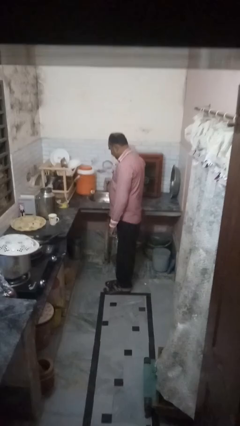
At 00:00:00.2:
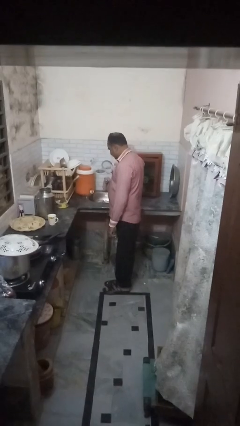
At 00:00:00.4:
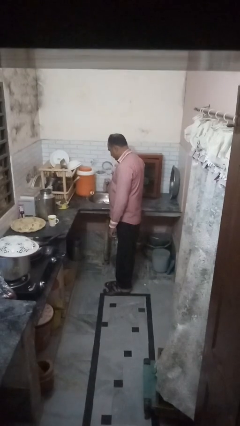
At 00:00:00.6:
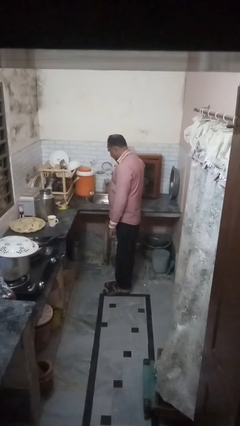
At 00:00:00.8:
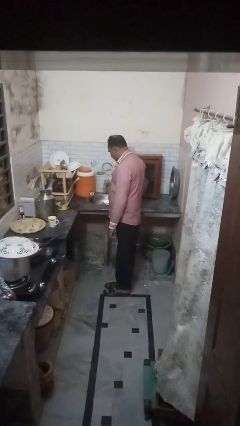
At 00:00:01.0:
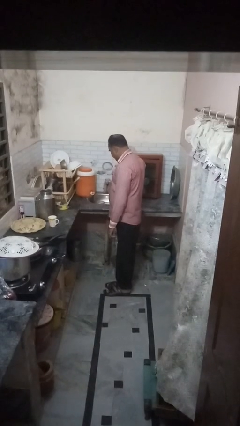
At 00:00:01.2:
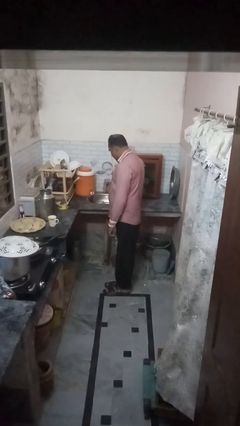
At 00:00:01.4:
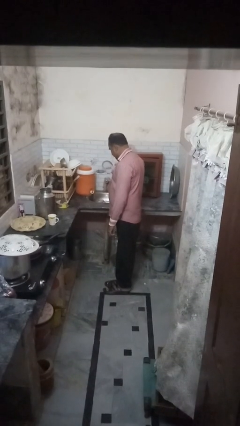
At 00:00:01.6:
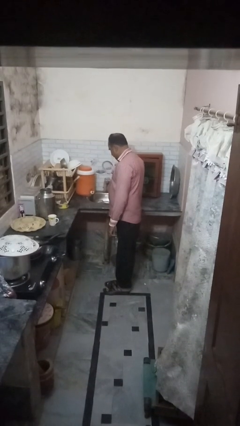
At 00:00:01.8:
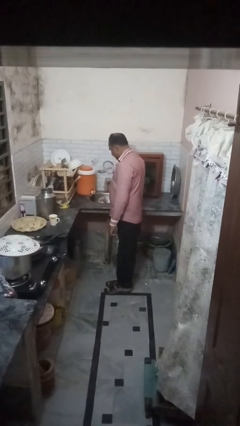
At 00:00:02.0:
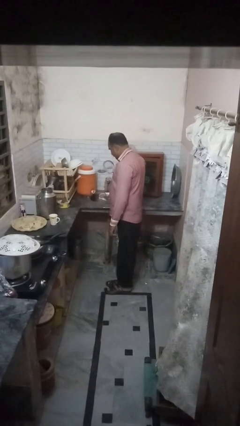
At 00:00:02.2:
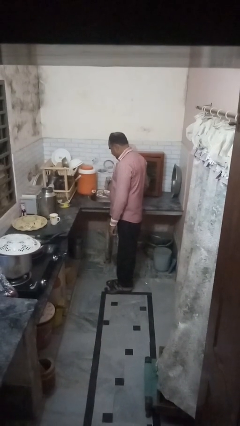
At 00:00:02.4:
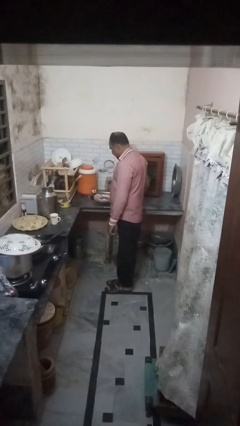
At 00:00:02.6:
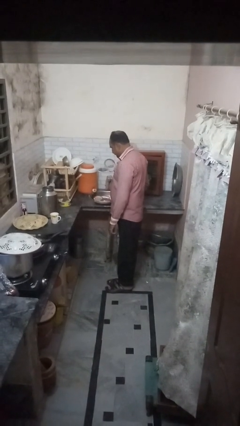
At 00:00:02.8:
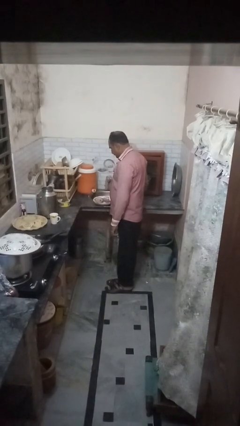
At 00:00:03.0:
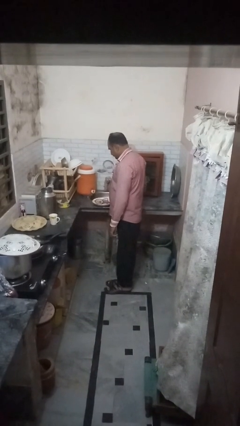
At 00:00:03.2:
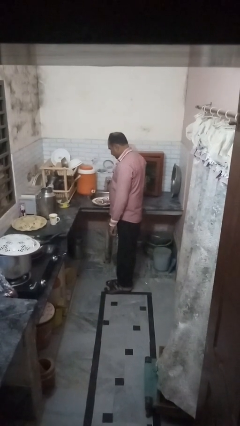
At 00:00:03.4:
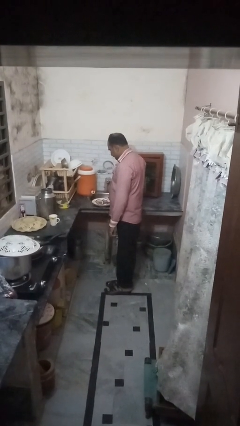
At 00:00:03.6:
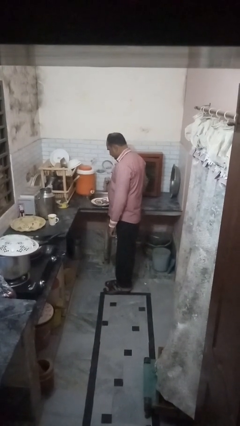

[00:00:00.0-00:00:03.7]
person unloads dishwasher

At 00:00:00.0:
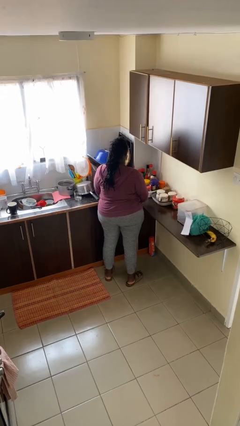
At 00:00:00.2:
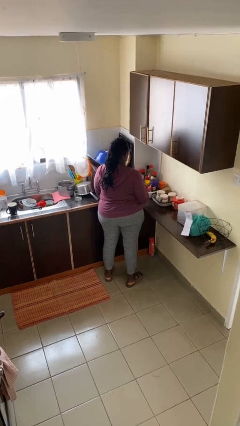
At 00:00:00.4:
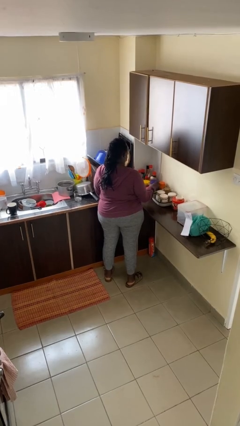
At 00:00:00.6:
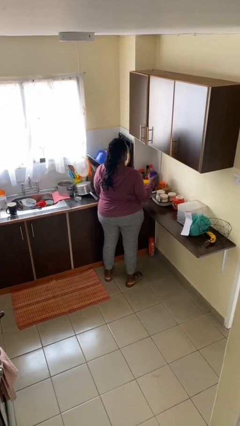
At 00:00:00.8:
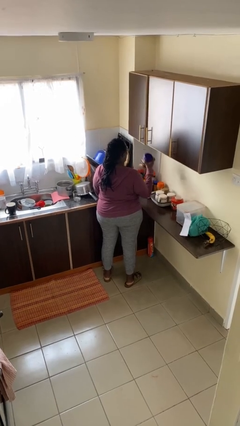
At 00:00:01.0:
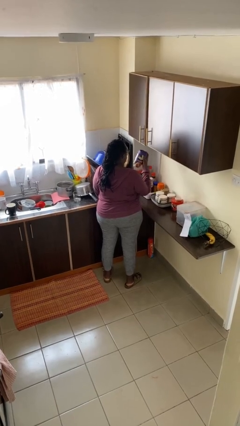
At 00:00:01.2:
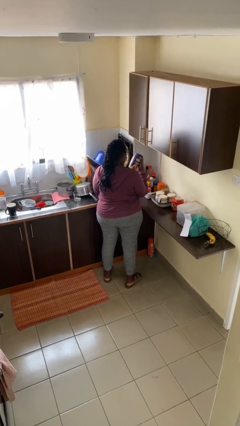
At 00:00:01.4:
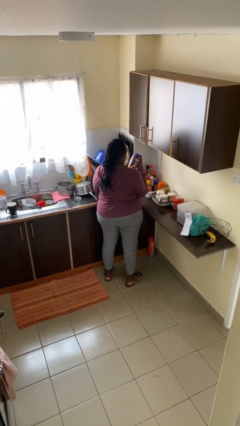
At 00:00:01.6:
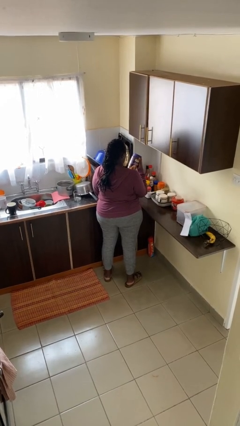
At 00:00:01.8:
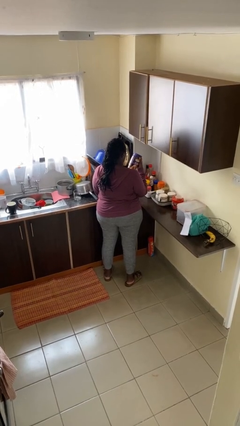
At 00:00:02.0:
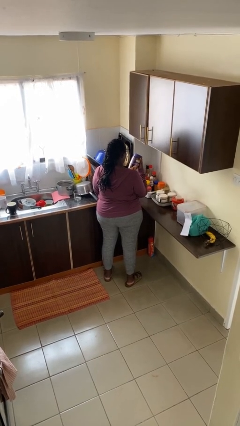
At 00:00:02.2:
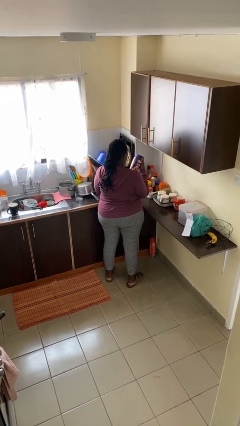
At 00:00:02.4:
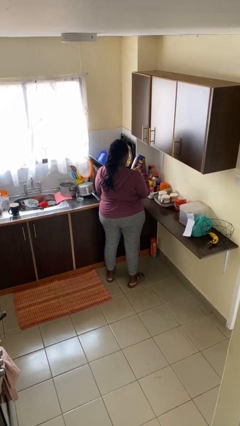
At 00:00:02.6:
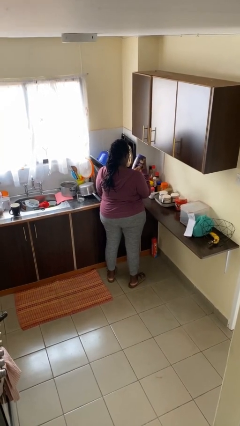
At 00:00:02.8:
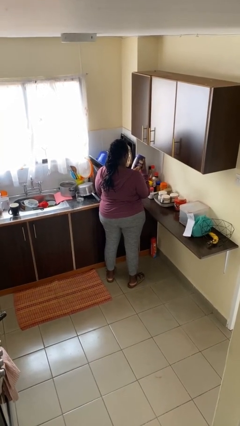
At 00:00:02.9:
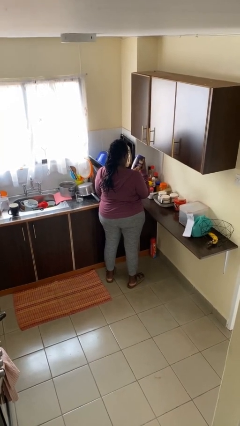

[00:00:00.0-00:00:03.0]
person picks up object from countertop

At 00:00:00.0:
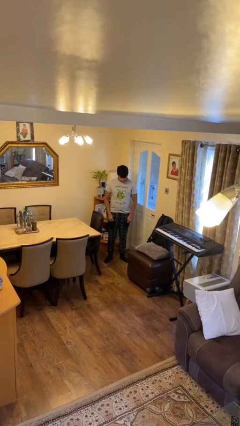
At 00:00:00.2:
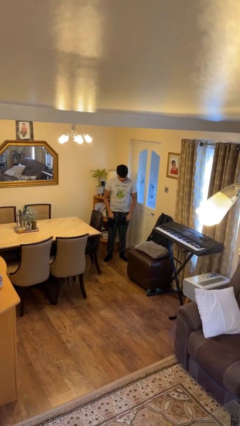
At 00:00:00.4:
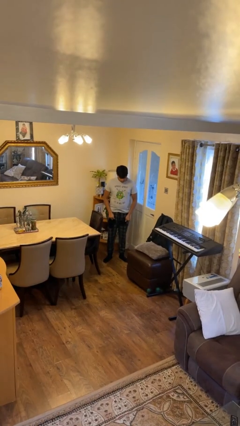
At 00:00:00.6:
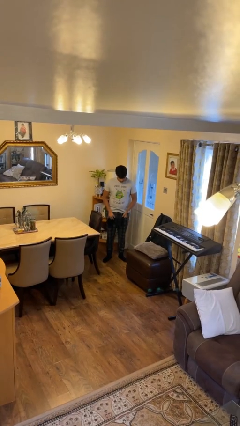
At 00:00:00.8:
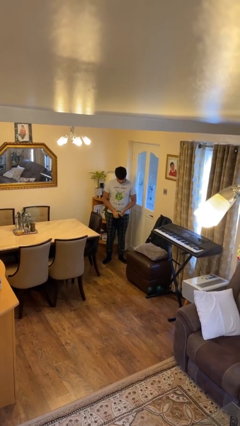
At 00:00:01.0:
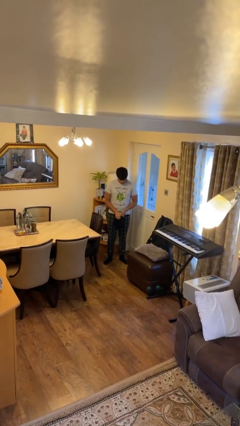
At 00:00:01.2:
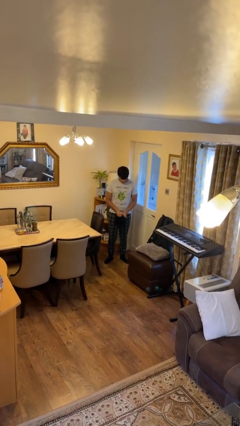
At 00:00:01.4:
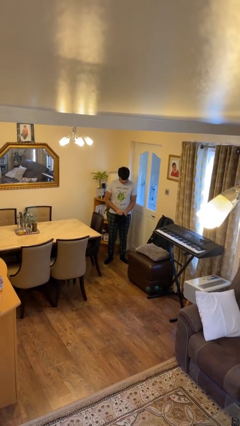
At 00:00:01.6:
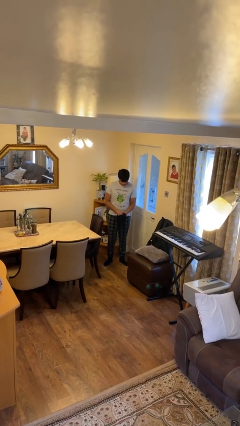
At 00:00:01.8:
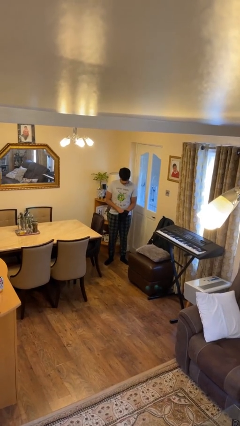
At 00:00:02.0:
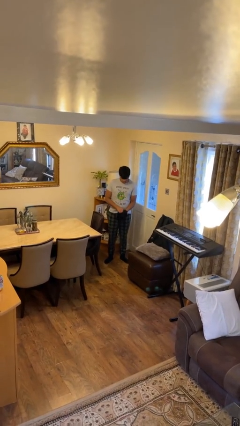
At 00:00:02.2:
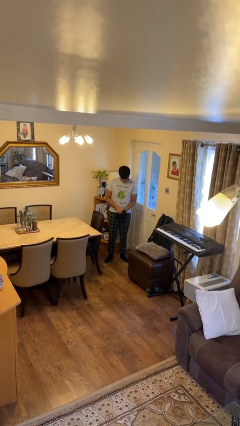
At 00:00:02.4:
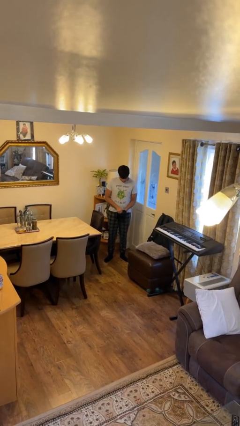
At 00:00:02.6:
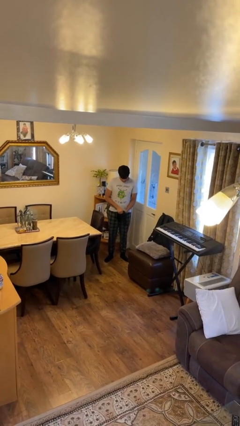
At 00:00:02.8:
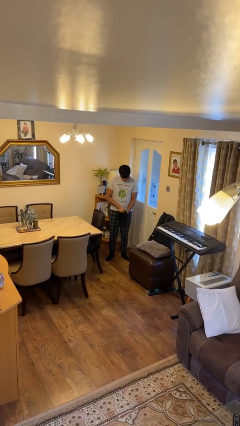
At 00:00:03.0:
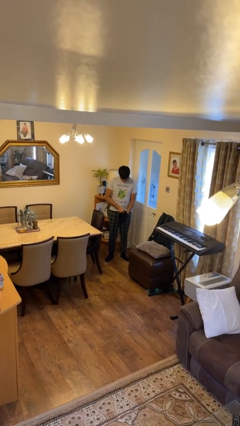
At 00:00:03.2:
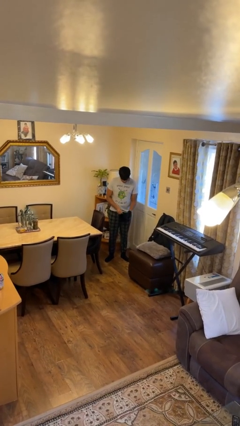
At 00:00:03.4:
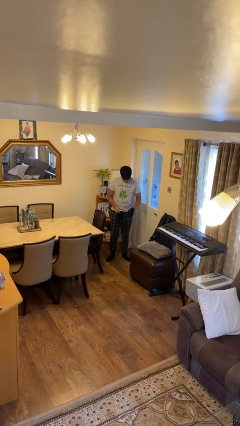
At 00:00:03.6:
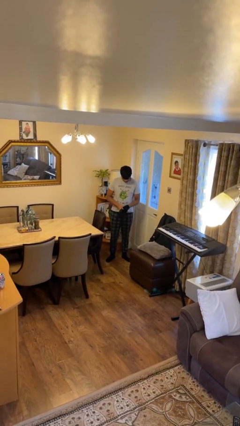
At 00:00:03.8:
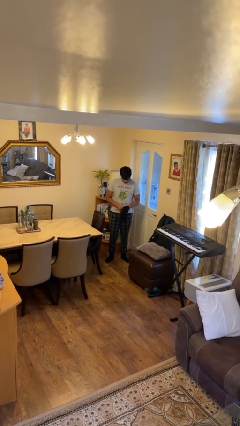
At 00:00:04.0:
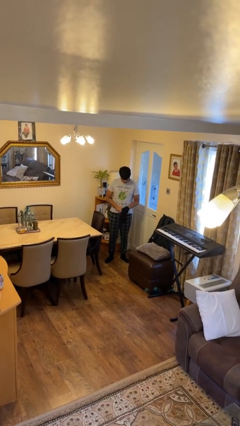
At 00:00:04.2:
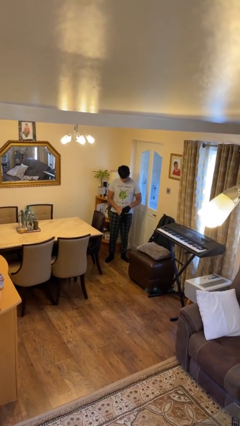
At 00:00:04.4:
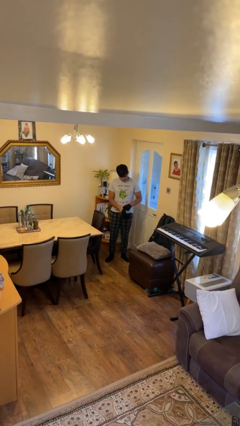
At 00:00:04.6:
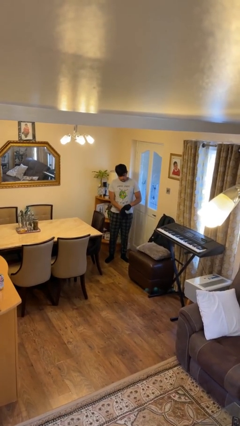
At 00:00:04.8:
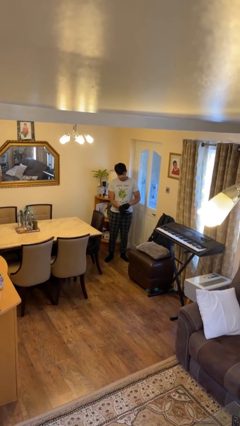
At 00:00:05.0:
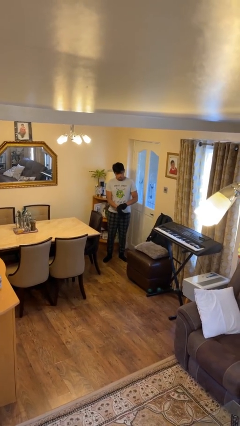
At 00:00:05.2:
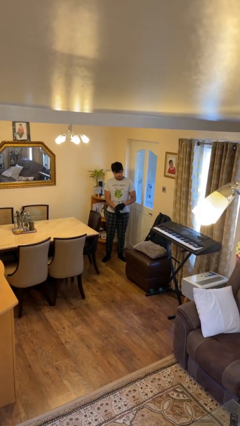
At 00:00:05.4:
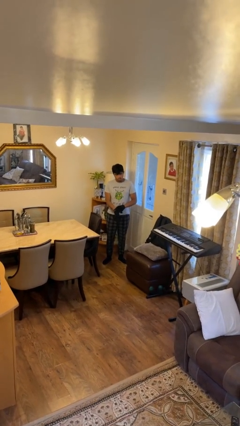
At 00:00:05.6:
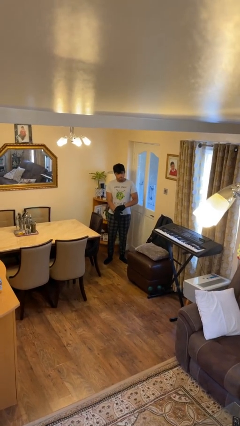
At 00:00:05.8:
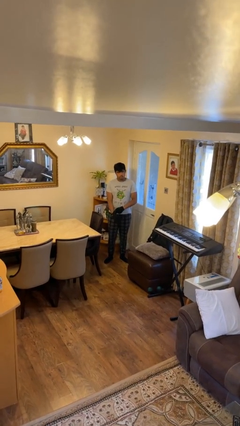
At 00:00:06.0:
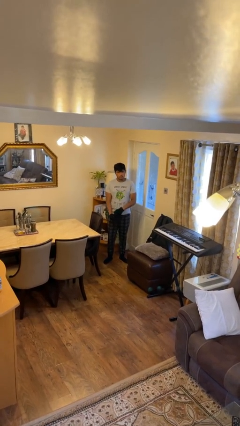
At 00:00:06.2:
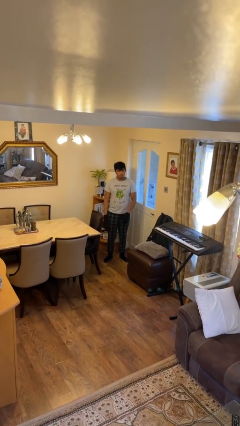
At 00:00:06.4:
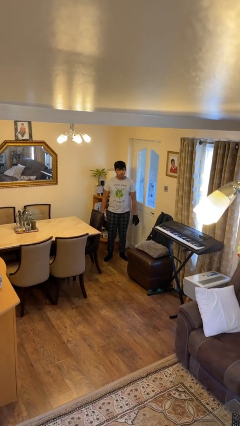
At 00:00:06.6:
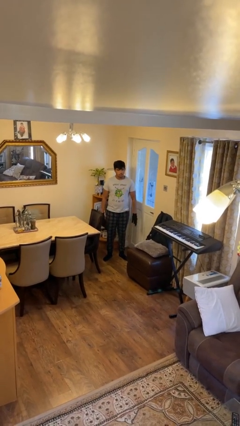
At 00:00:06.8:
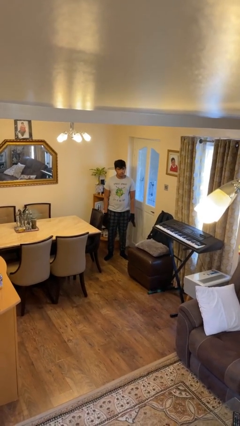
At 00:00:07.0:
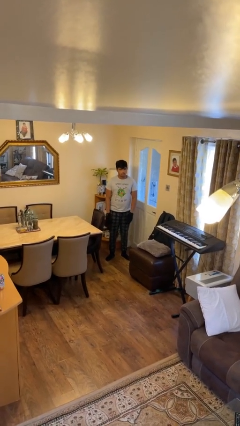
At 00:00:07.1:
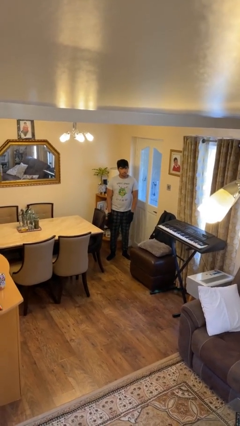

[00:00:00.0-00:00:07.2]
person puts on gloves

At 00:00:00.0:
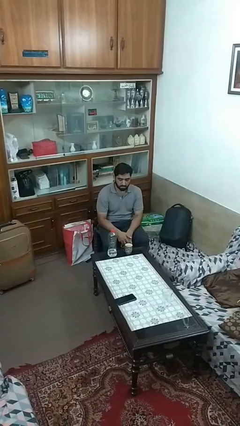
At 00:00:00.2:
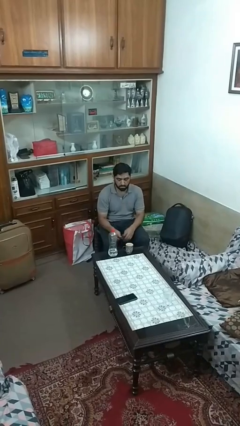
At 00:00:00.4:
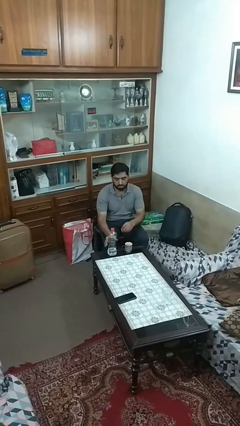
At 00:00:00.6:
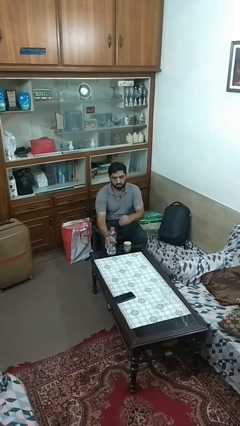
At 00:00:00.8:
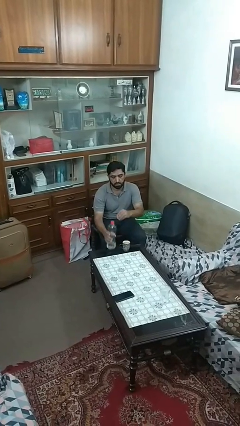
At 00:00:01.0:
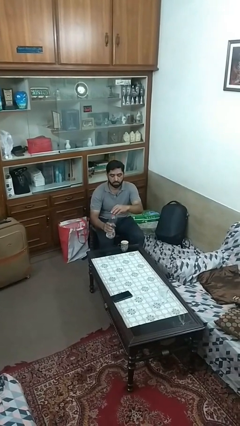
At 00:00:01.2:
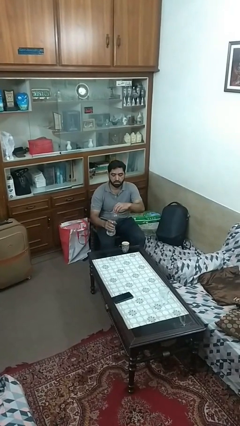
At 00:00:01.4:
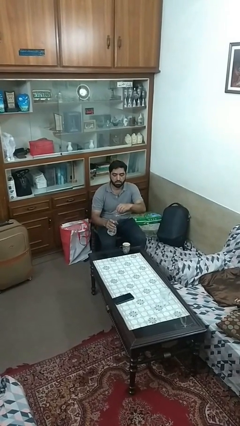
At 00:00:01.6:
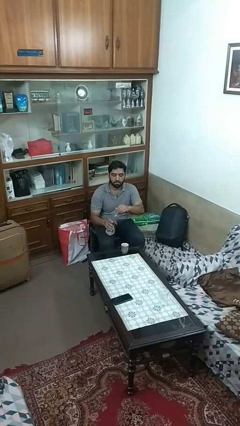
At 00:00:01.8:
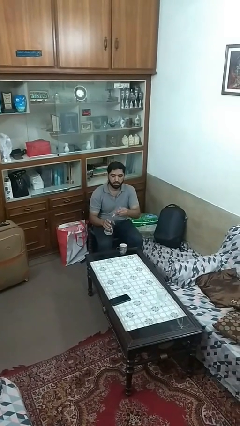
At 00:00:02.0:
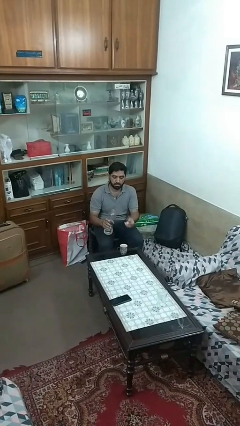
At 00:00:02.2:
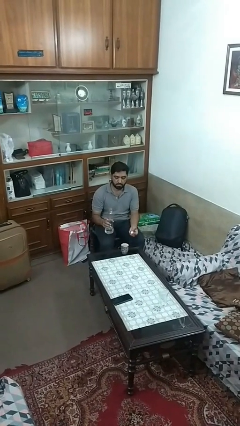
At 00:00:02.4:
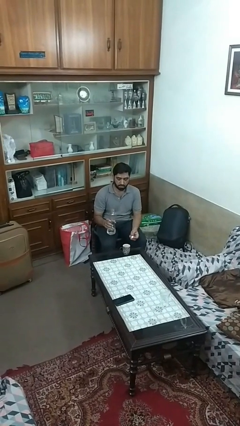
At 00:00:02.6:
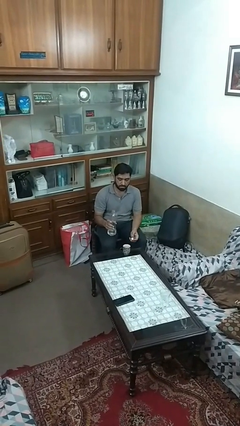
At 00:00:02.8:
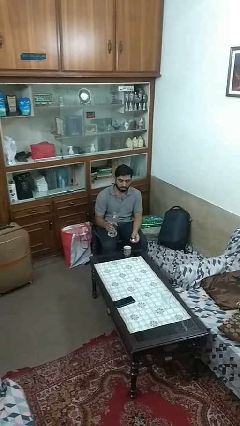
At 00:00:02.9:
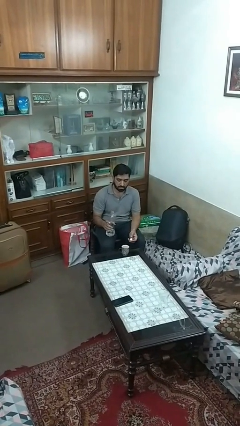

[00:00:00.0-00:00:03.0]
person unscrews lid from bottle

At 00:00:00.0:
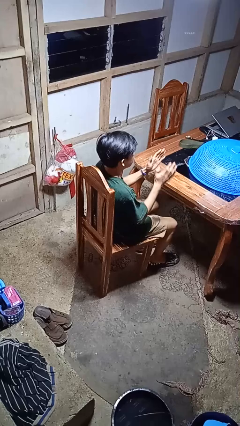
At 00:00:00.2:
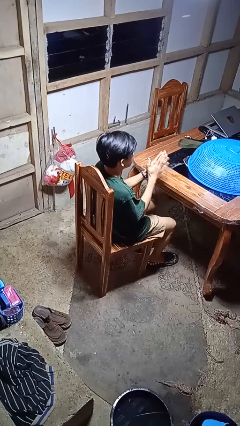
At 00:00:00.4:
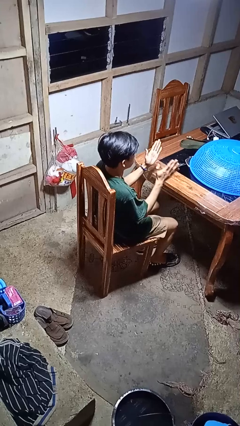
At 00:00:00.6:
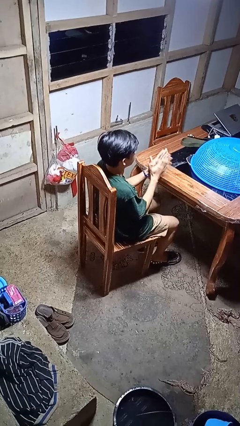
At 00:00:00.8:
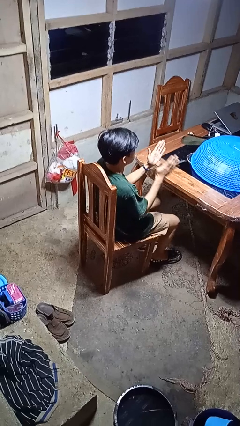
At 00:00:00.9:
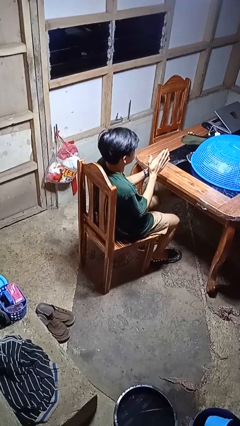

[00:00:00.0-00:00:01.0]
person claps hands
